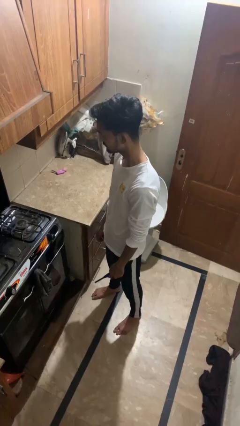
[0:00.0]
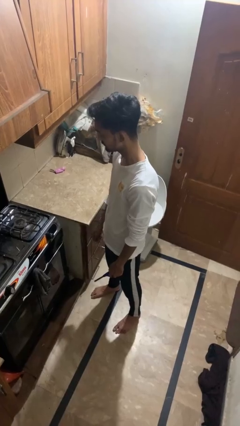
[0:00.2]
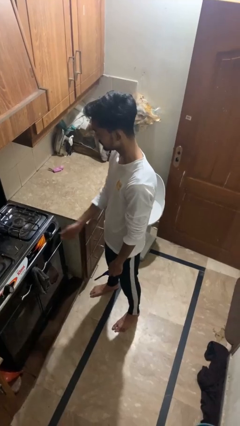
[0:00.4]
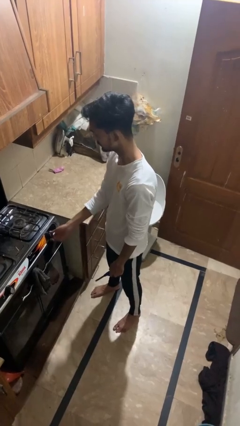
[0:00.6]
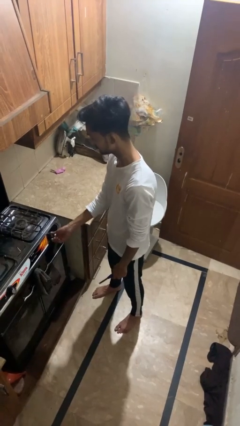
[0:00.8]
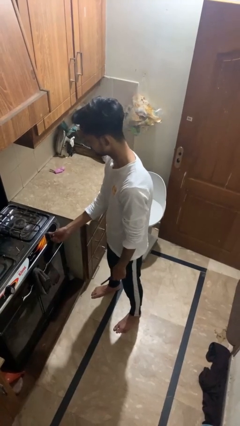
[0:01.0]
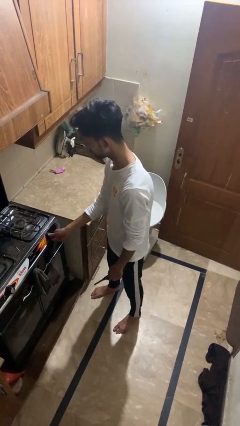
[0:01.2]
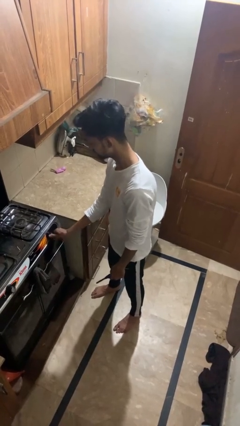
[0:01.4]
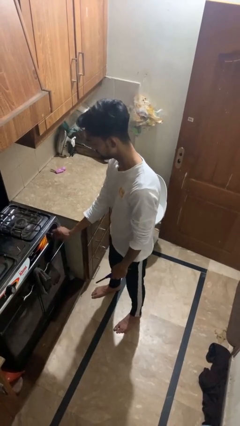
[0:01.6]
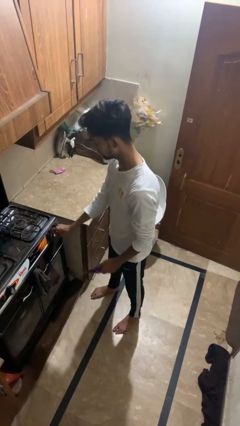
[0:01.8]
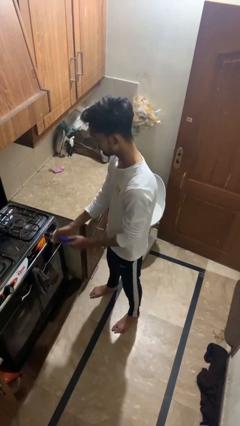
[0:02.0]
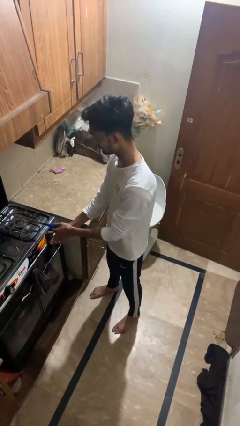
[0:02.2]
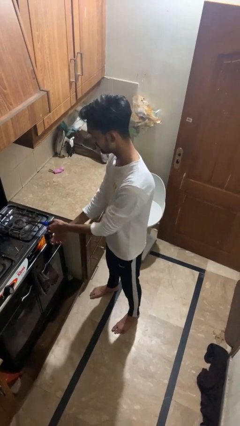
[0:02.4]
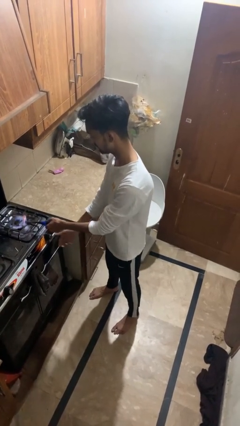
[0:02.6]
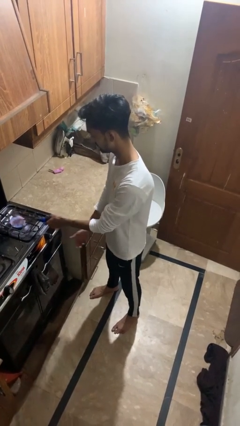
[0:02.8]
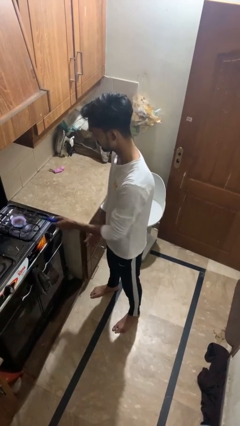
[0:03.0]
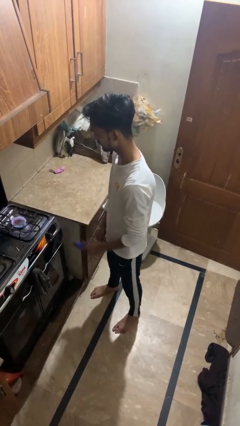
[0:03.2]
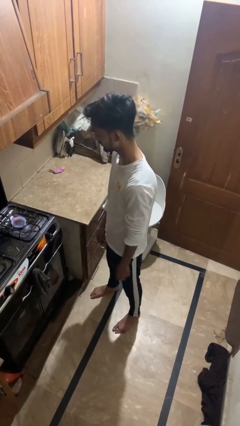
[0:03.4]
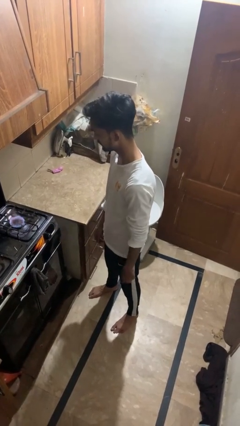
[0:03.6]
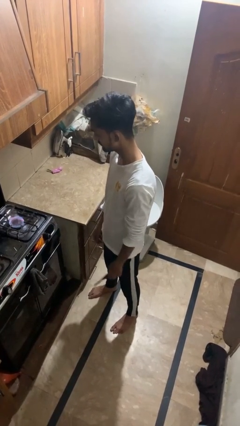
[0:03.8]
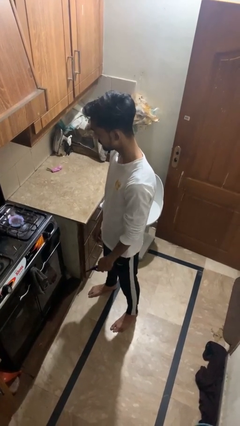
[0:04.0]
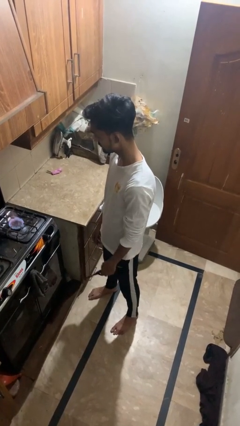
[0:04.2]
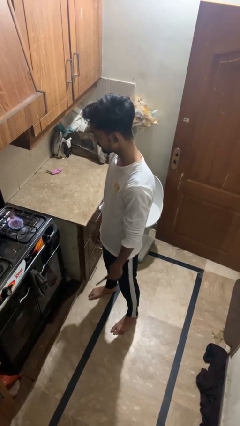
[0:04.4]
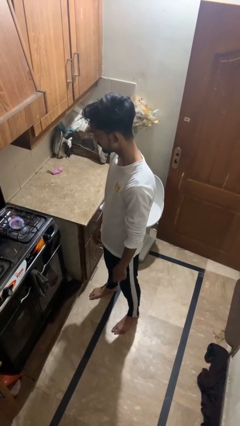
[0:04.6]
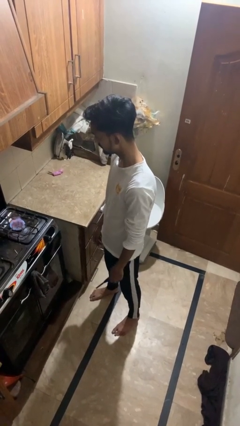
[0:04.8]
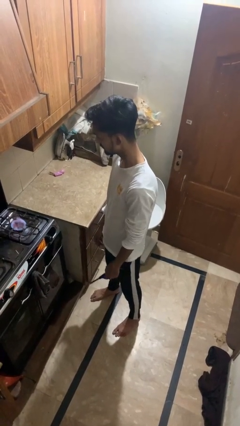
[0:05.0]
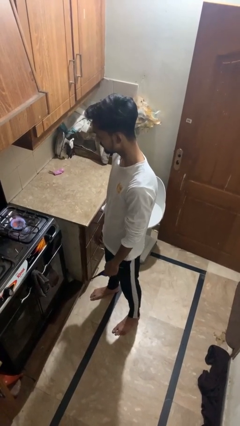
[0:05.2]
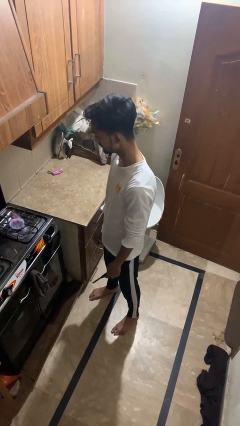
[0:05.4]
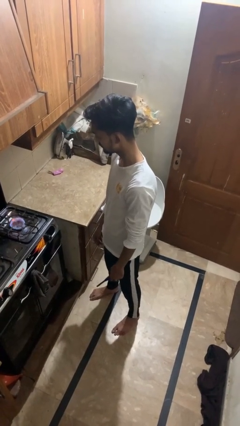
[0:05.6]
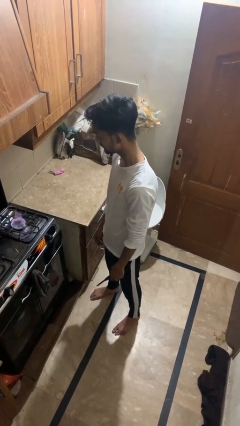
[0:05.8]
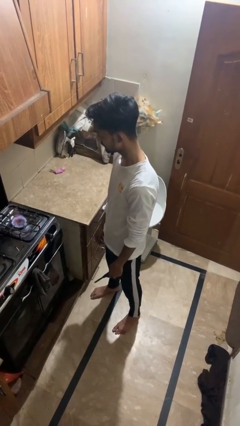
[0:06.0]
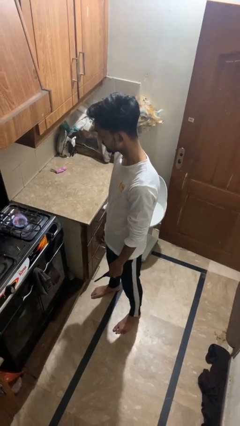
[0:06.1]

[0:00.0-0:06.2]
person turns on stovetop

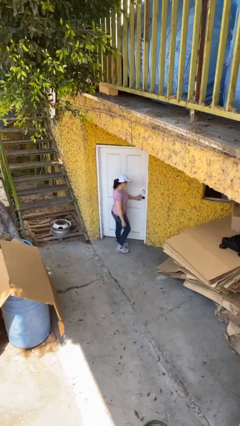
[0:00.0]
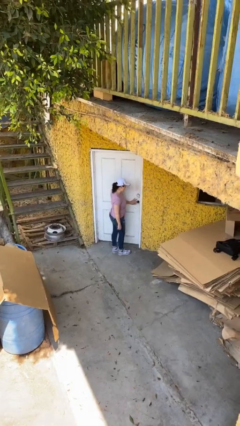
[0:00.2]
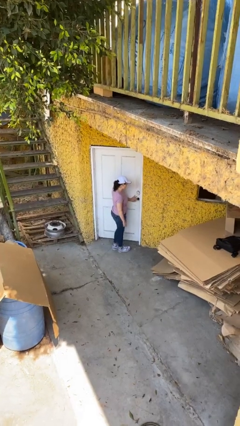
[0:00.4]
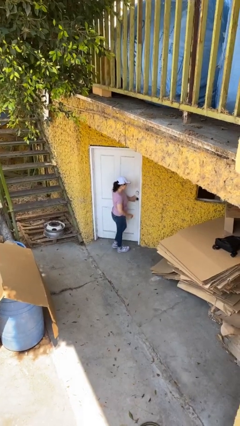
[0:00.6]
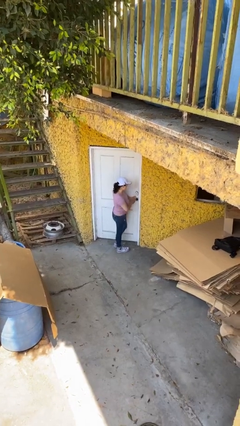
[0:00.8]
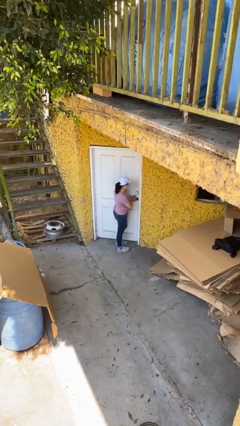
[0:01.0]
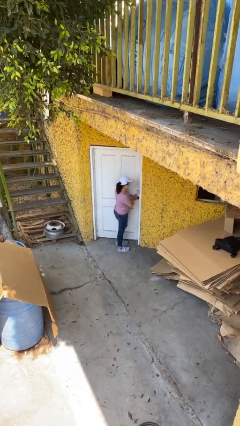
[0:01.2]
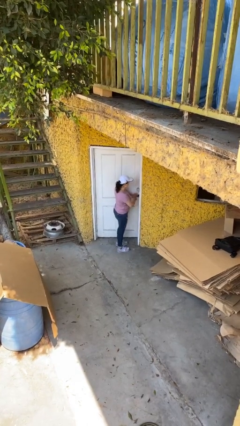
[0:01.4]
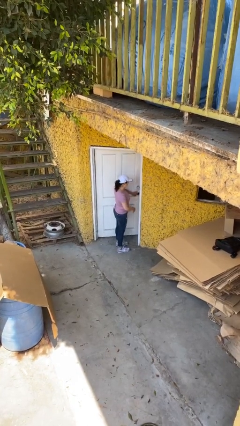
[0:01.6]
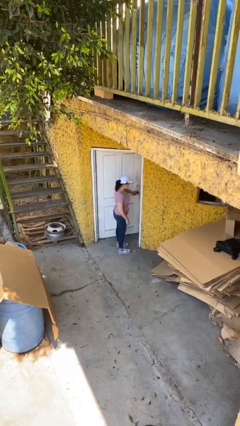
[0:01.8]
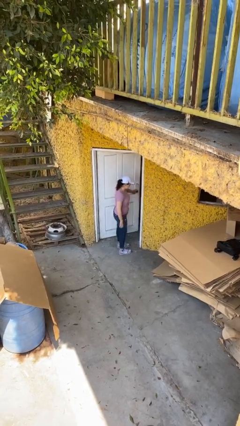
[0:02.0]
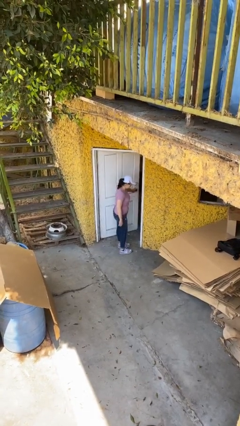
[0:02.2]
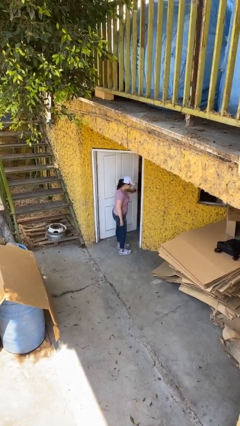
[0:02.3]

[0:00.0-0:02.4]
person opens facility door

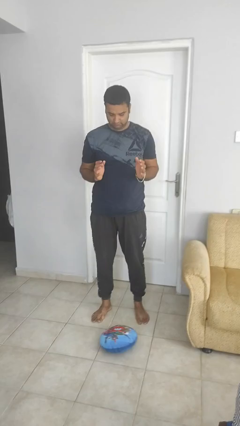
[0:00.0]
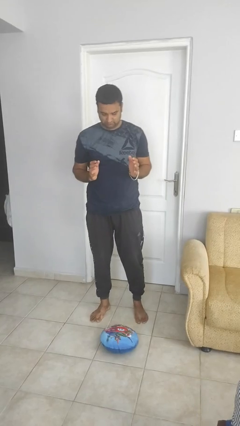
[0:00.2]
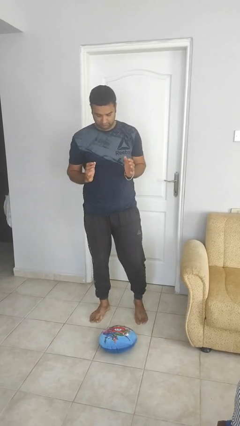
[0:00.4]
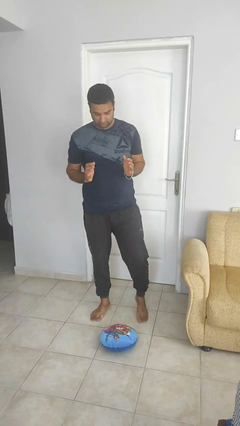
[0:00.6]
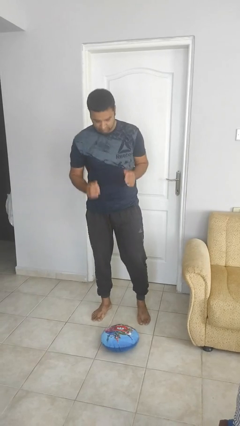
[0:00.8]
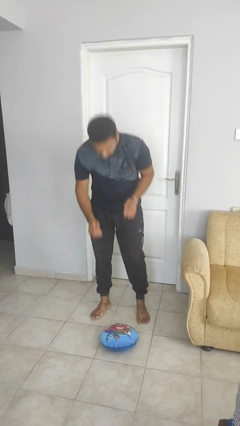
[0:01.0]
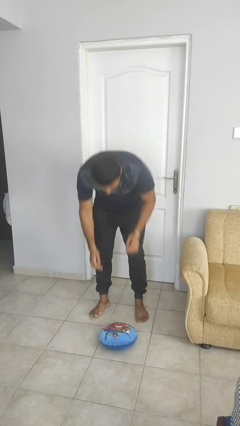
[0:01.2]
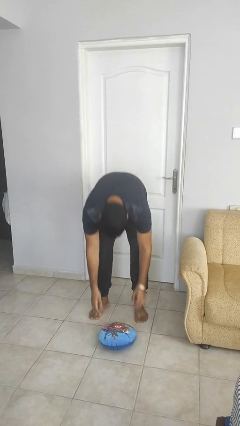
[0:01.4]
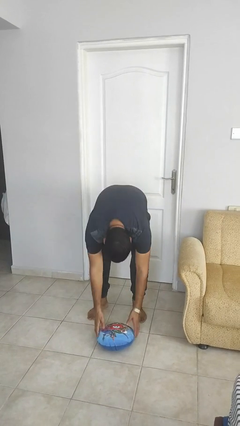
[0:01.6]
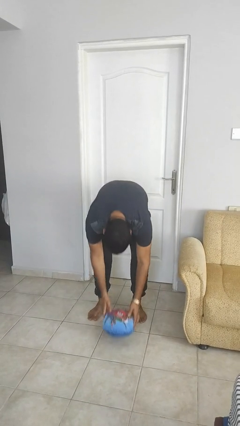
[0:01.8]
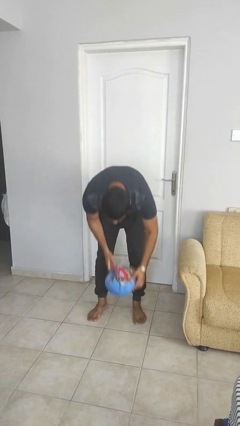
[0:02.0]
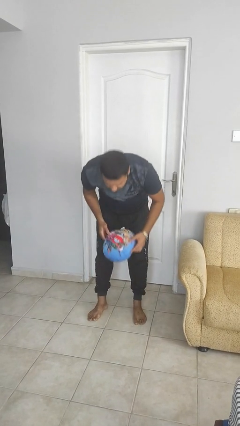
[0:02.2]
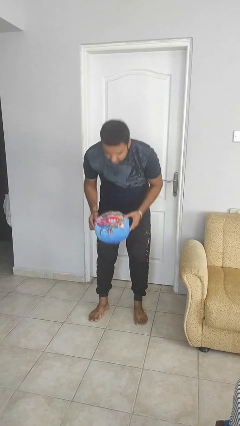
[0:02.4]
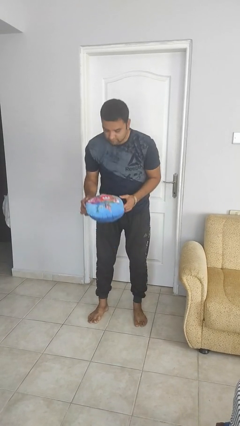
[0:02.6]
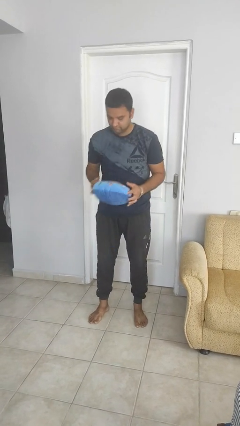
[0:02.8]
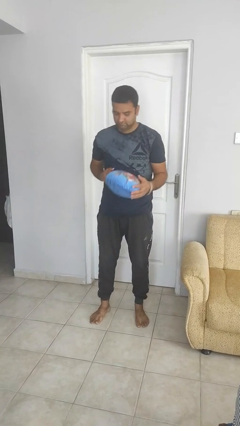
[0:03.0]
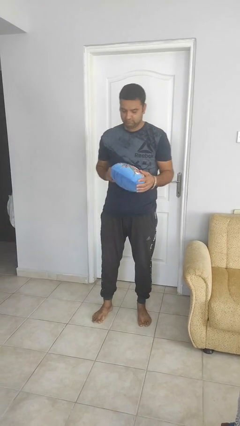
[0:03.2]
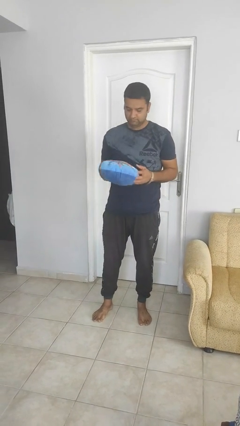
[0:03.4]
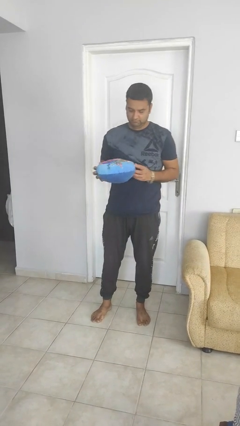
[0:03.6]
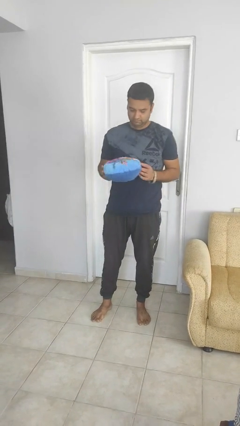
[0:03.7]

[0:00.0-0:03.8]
person picks up object from floor

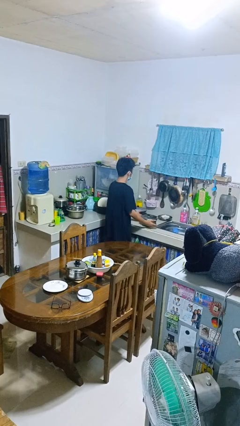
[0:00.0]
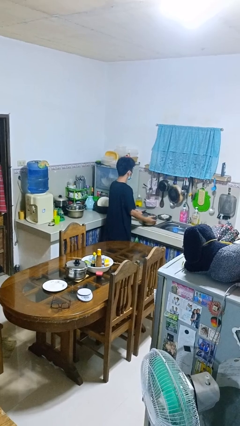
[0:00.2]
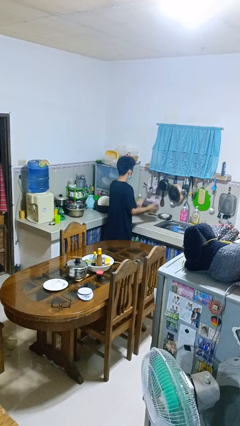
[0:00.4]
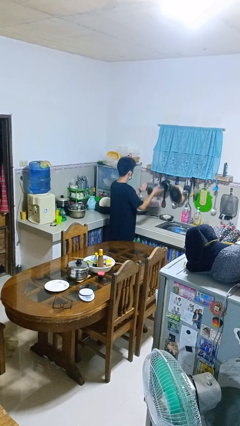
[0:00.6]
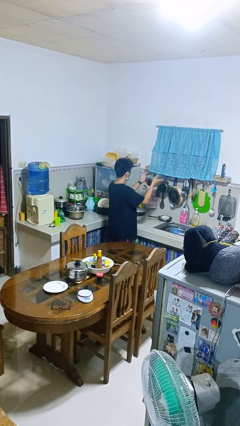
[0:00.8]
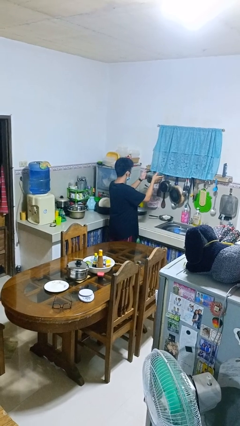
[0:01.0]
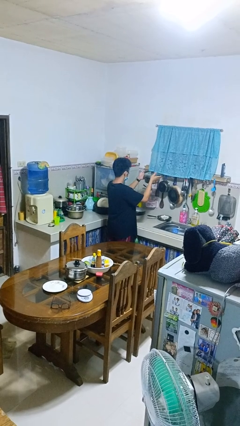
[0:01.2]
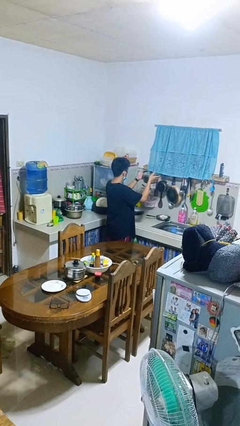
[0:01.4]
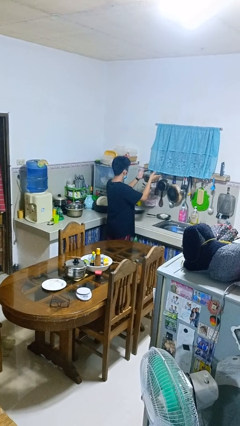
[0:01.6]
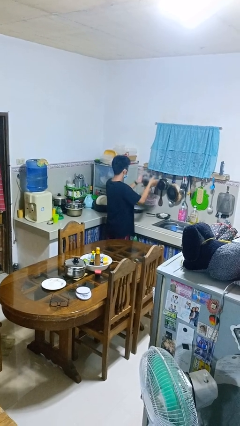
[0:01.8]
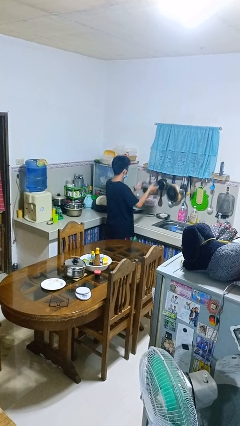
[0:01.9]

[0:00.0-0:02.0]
person picks up object from countertop

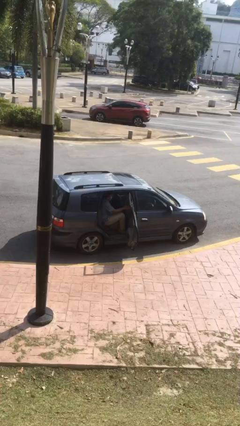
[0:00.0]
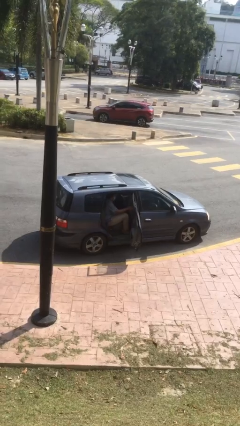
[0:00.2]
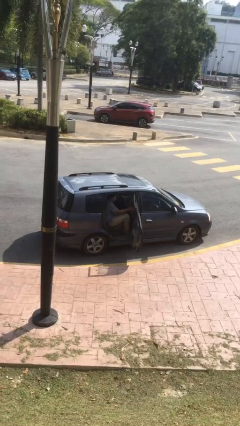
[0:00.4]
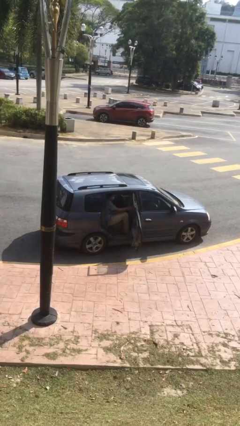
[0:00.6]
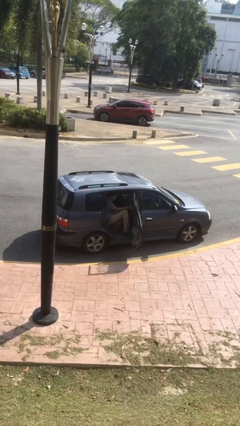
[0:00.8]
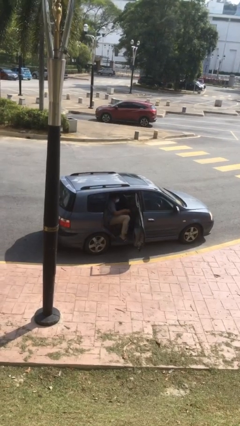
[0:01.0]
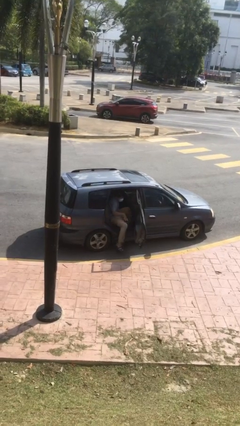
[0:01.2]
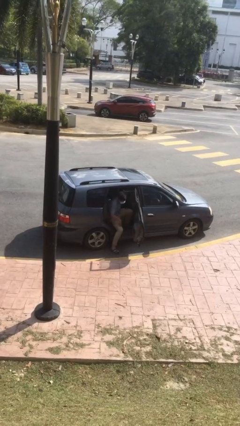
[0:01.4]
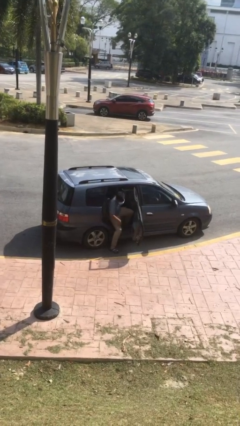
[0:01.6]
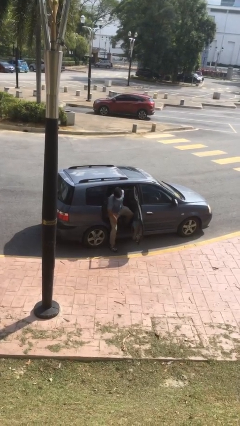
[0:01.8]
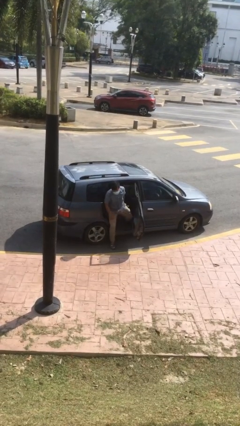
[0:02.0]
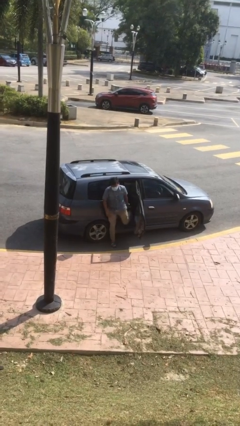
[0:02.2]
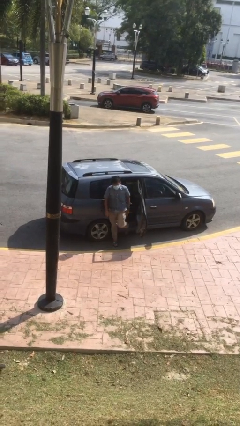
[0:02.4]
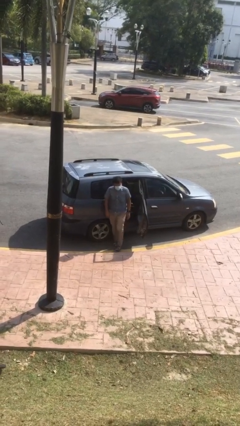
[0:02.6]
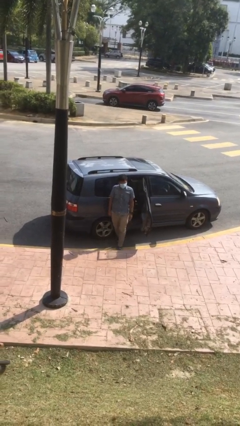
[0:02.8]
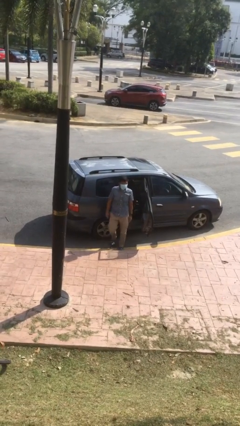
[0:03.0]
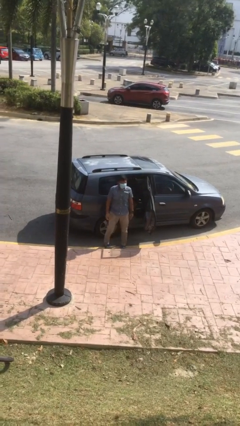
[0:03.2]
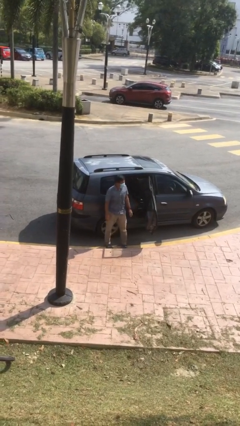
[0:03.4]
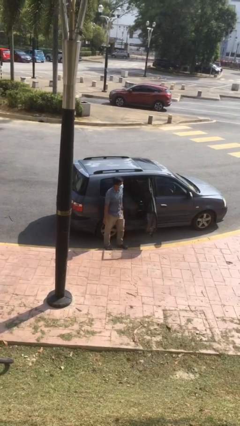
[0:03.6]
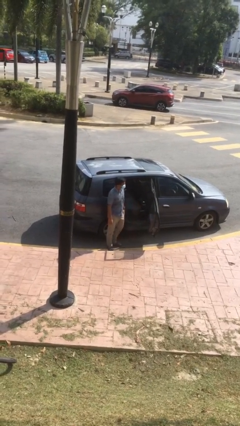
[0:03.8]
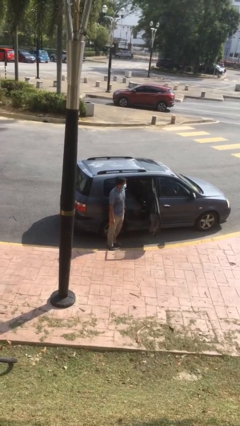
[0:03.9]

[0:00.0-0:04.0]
person exits car
